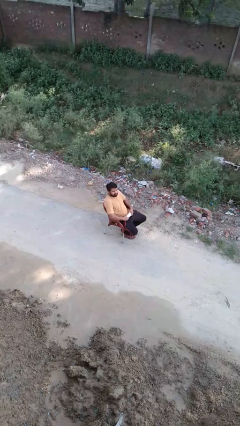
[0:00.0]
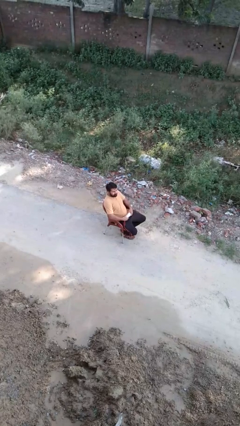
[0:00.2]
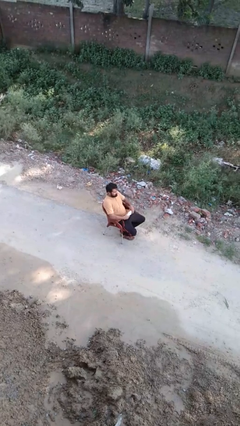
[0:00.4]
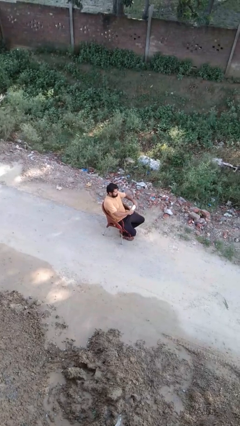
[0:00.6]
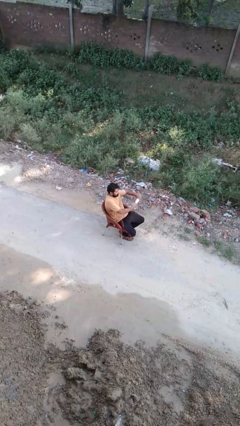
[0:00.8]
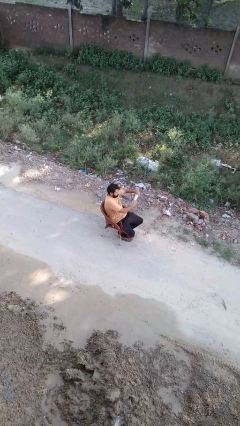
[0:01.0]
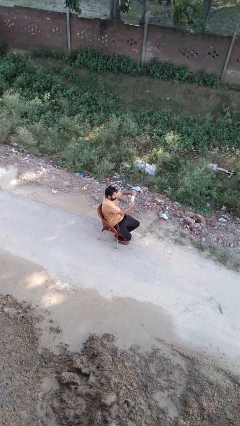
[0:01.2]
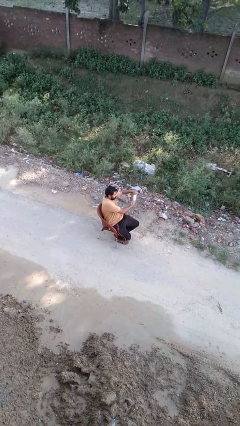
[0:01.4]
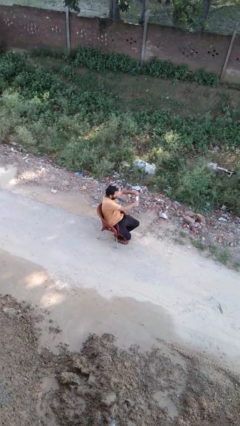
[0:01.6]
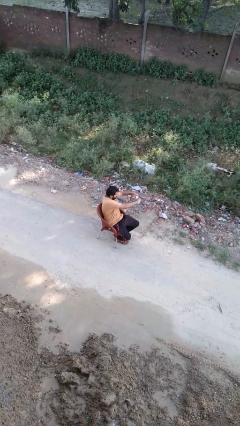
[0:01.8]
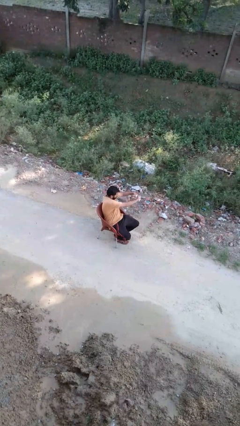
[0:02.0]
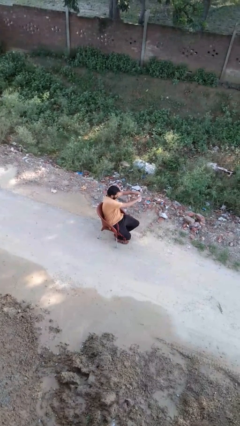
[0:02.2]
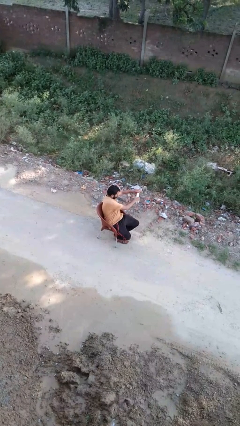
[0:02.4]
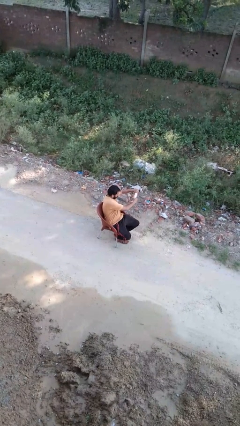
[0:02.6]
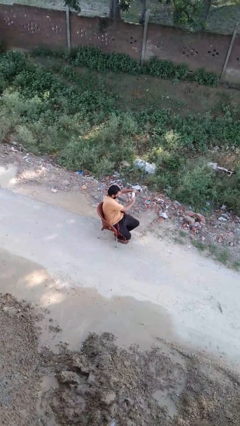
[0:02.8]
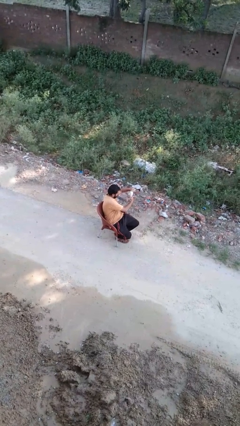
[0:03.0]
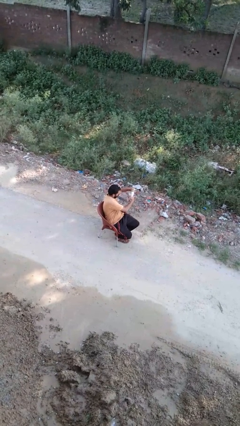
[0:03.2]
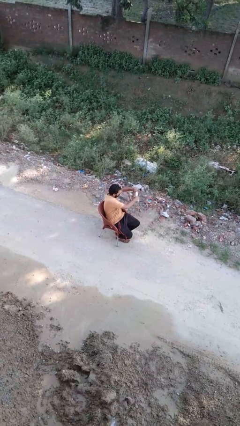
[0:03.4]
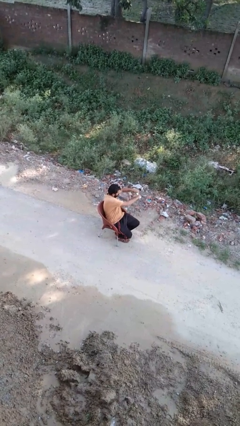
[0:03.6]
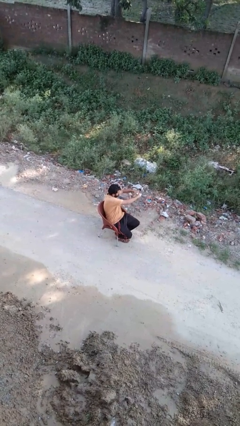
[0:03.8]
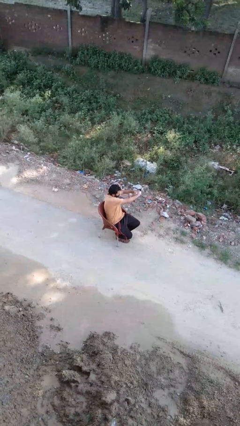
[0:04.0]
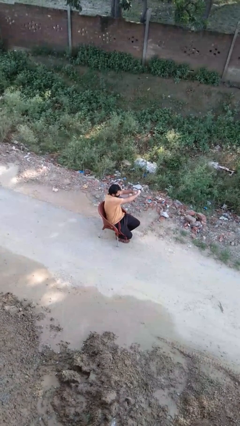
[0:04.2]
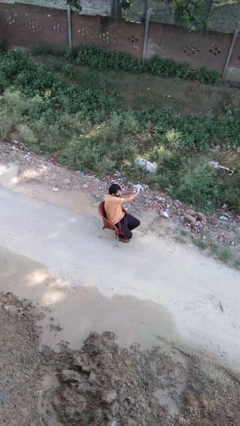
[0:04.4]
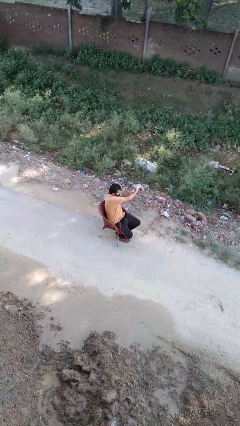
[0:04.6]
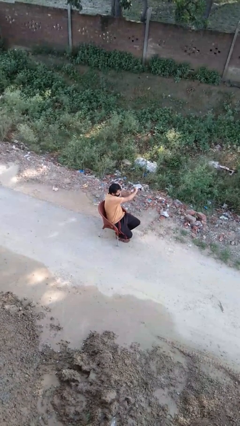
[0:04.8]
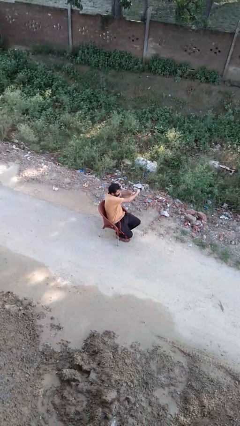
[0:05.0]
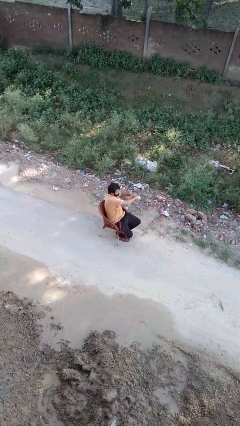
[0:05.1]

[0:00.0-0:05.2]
person squeezes object

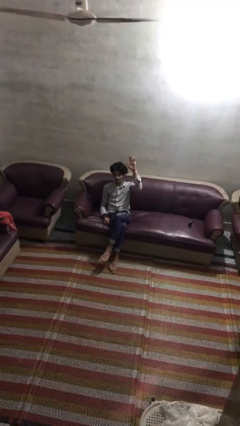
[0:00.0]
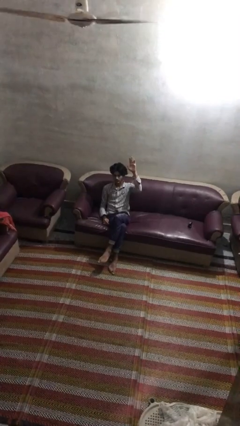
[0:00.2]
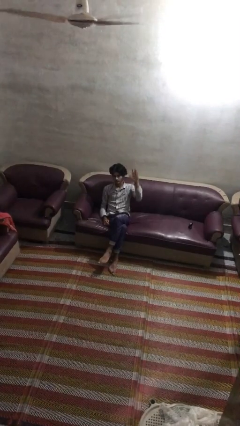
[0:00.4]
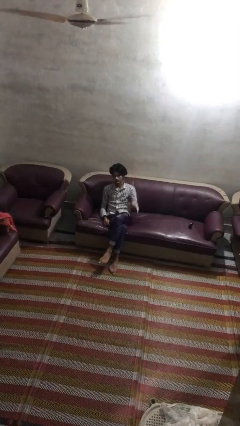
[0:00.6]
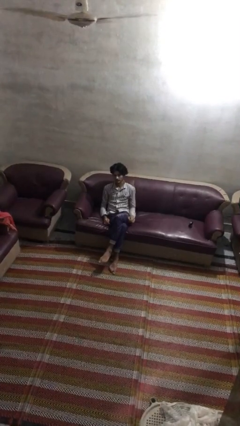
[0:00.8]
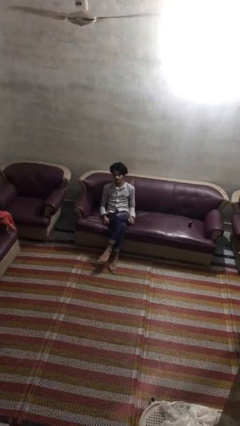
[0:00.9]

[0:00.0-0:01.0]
person gestures lower hand

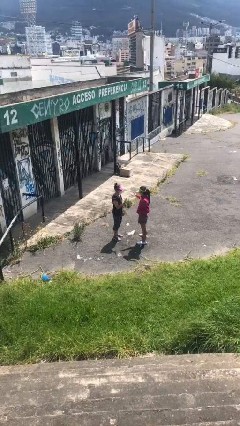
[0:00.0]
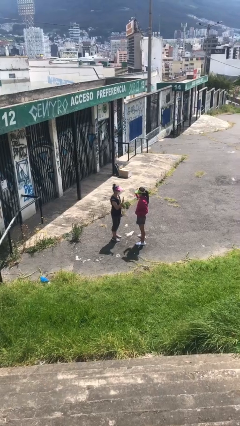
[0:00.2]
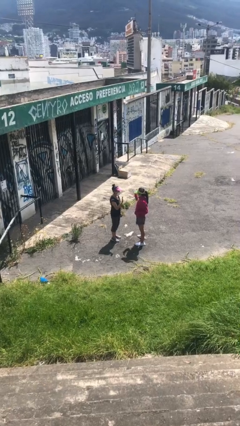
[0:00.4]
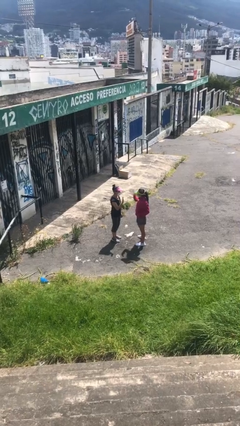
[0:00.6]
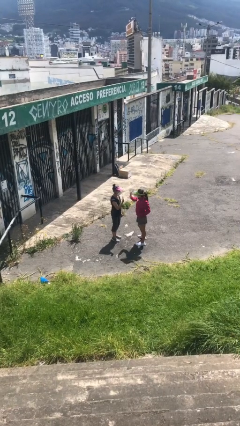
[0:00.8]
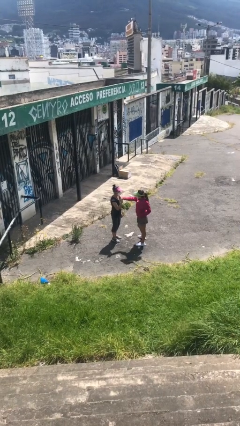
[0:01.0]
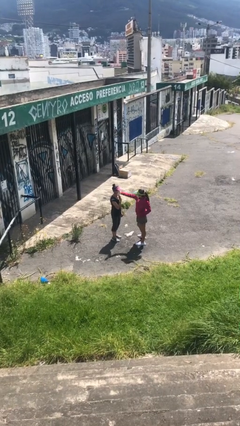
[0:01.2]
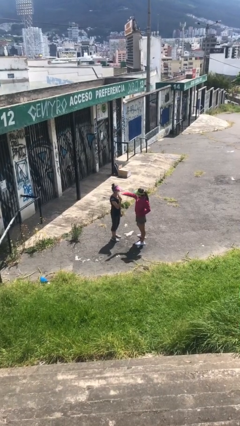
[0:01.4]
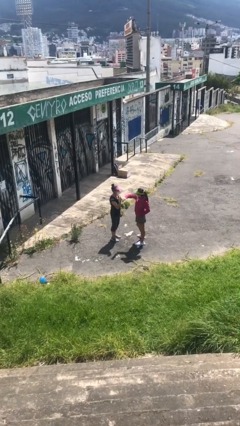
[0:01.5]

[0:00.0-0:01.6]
person highfives hand

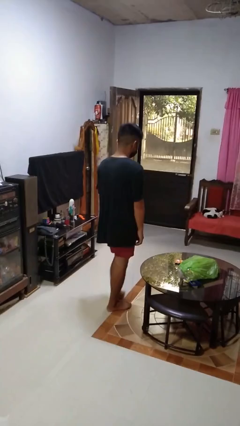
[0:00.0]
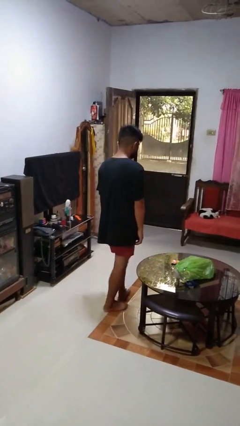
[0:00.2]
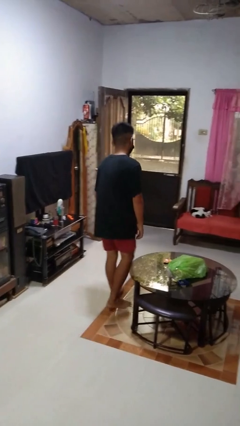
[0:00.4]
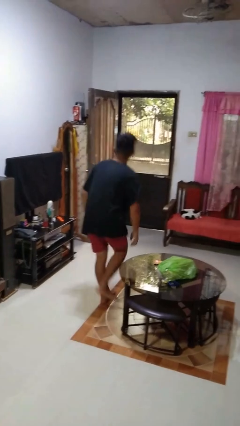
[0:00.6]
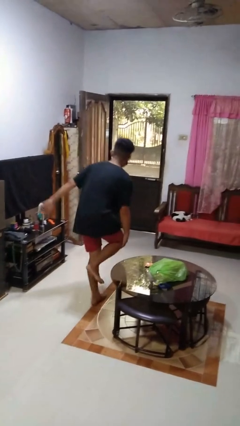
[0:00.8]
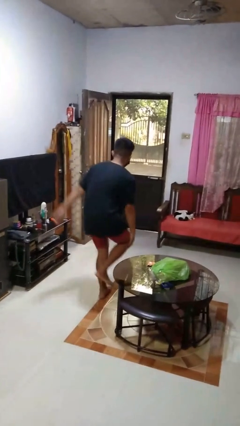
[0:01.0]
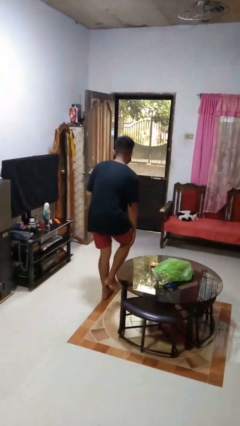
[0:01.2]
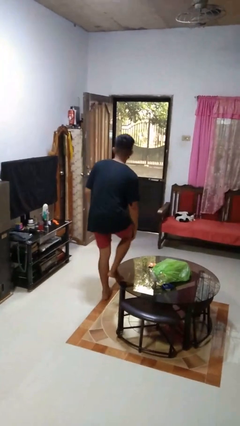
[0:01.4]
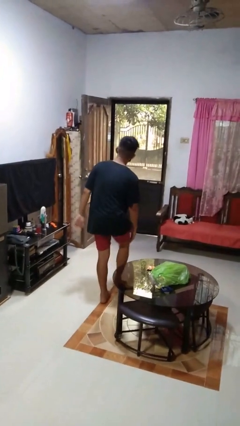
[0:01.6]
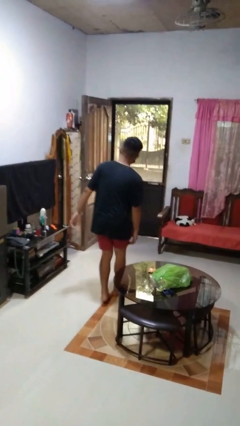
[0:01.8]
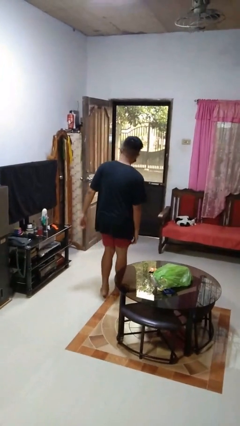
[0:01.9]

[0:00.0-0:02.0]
person bumps into table

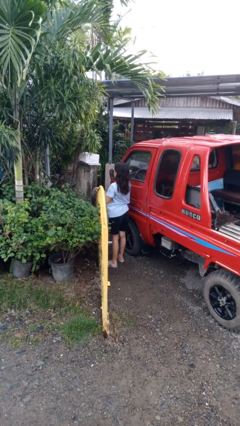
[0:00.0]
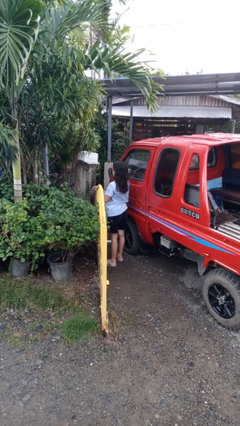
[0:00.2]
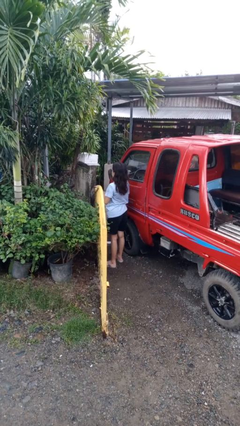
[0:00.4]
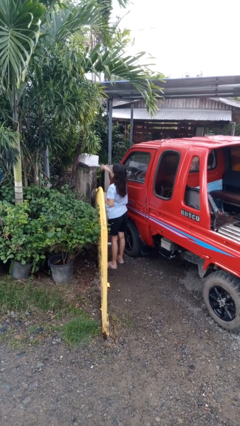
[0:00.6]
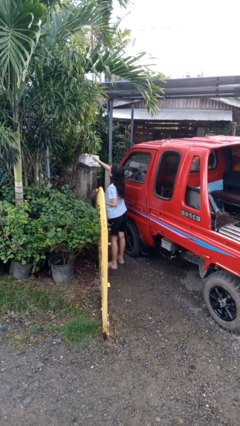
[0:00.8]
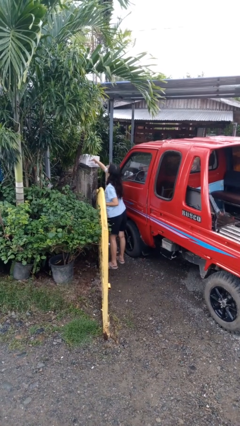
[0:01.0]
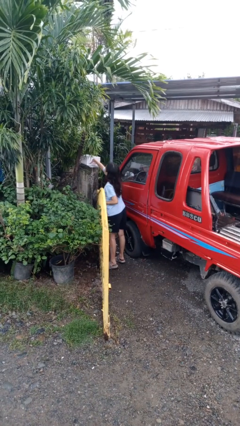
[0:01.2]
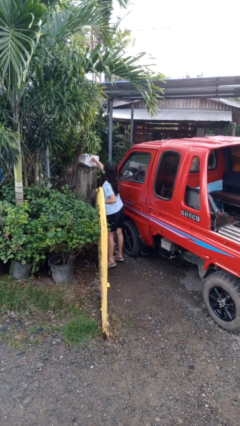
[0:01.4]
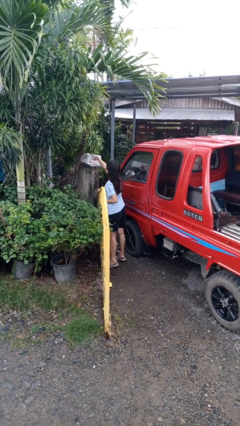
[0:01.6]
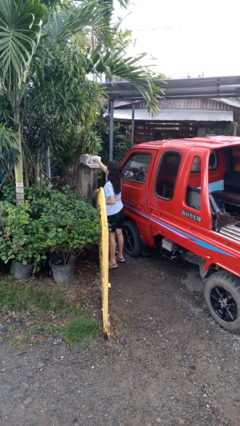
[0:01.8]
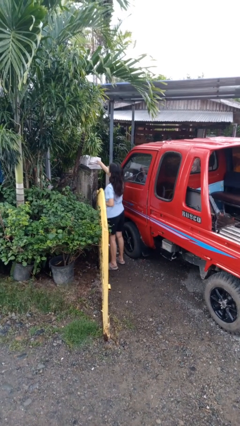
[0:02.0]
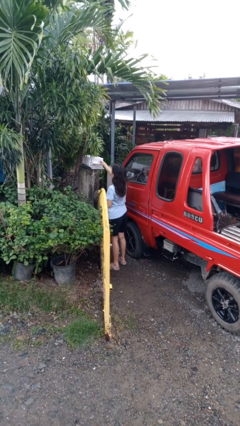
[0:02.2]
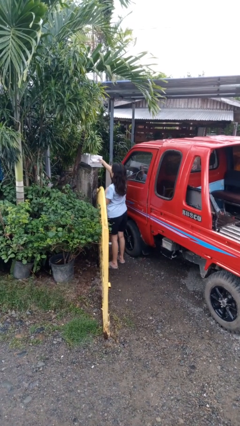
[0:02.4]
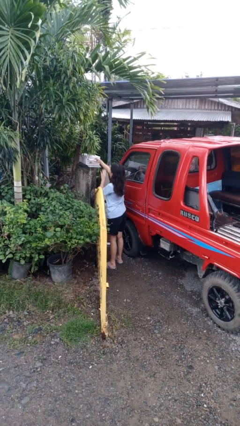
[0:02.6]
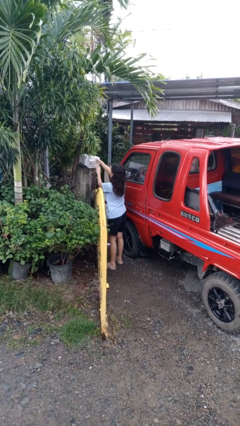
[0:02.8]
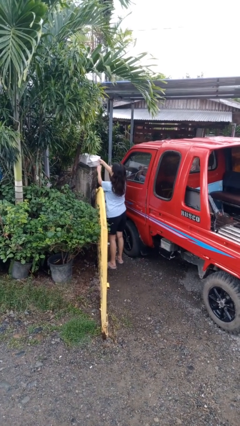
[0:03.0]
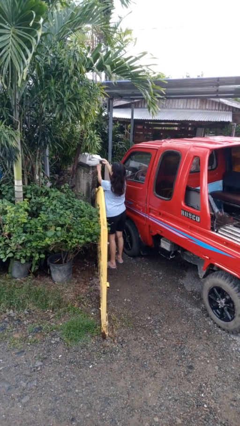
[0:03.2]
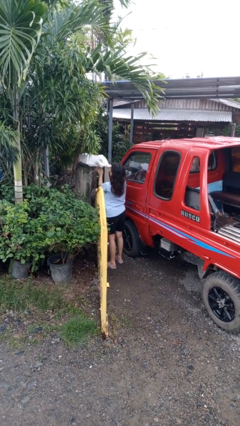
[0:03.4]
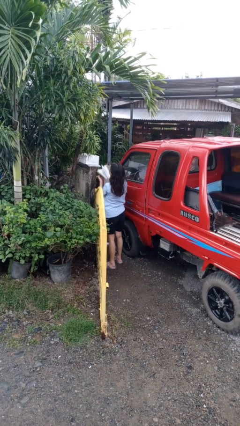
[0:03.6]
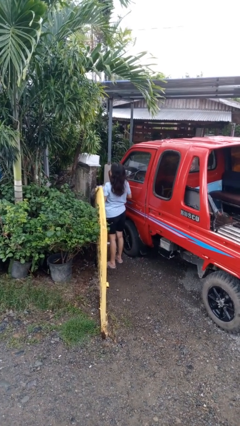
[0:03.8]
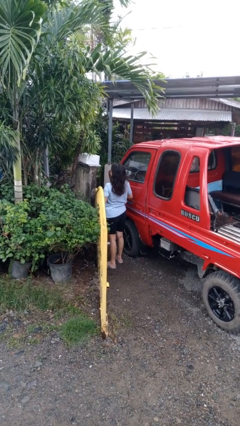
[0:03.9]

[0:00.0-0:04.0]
person takes letters from mailbox

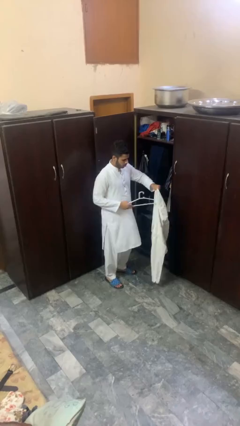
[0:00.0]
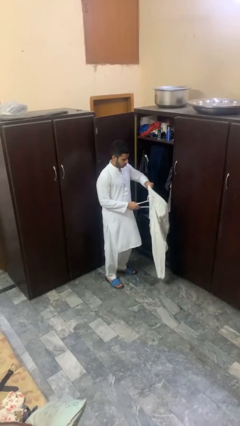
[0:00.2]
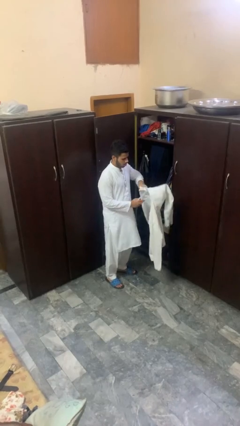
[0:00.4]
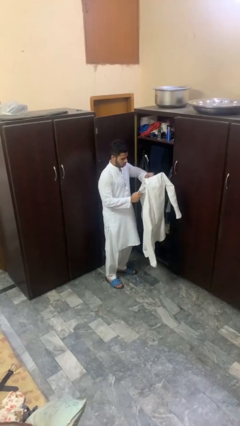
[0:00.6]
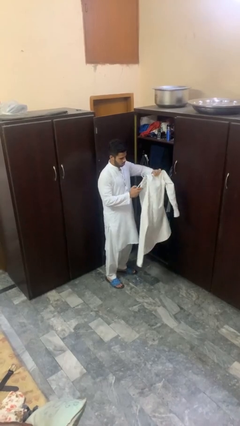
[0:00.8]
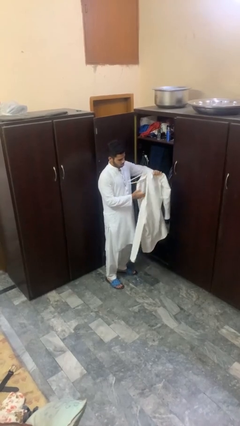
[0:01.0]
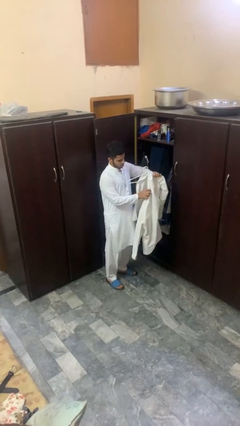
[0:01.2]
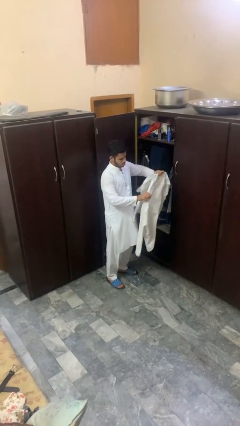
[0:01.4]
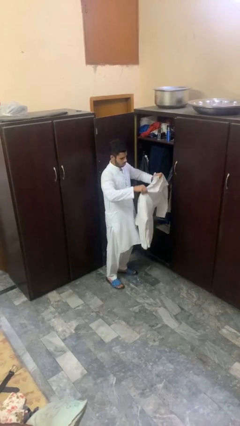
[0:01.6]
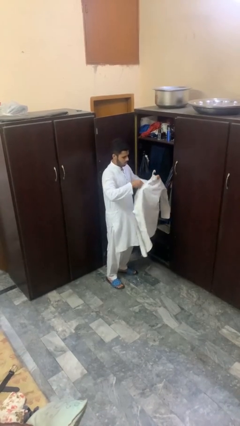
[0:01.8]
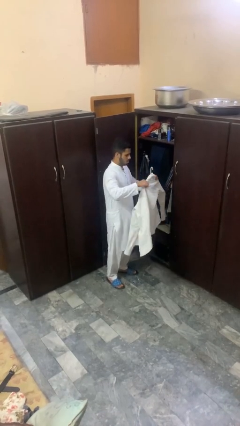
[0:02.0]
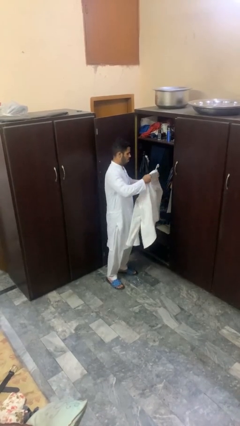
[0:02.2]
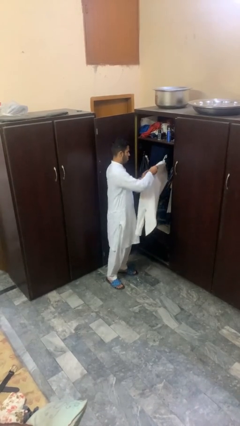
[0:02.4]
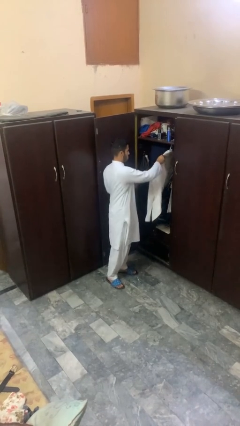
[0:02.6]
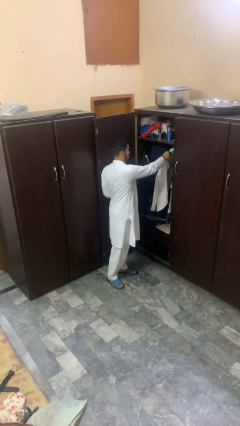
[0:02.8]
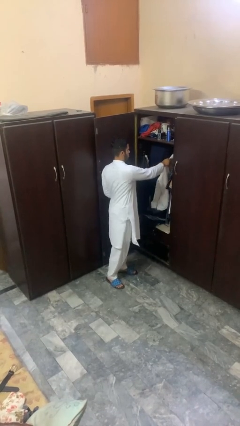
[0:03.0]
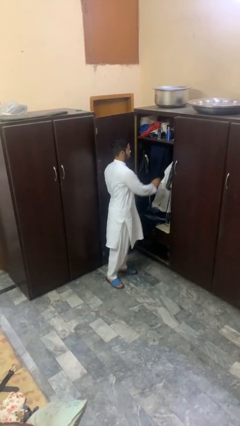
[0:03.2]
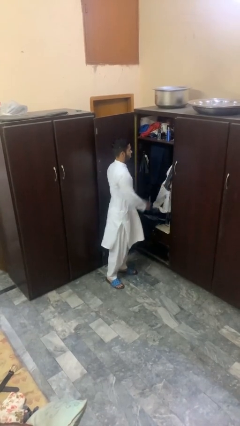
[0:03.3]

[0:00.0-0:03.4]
person puts clothes into closet

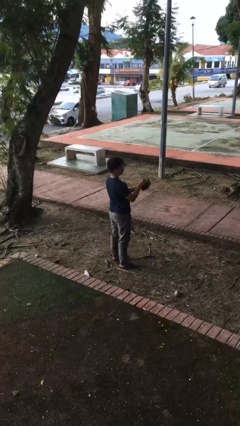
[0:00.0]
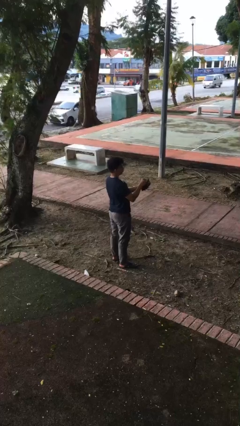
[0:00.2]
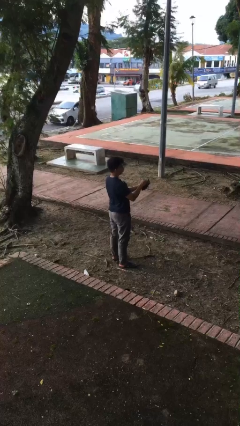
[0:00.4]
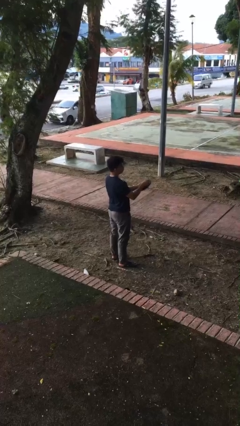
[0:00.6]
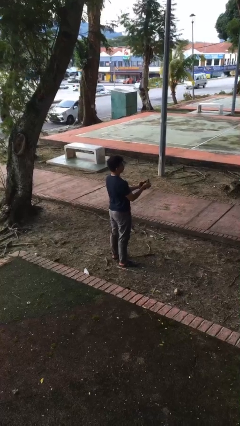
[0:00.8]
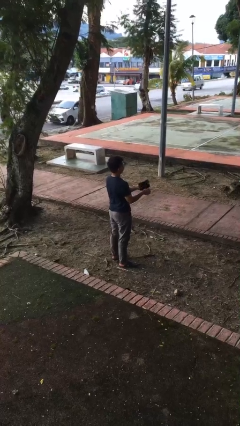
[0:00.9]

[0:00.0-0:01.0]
person puts object into purse
